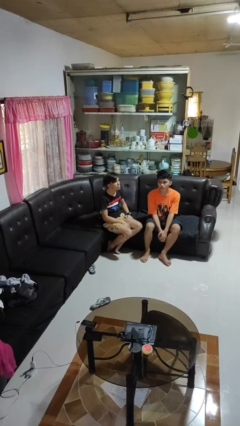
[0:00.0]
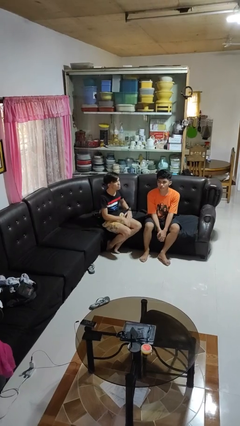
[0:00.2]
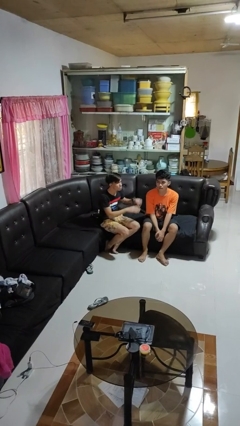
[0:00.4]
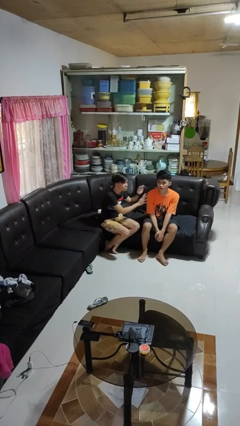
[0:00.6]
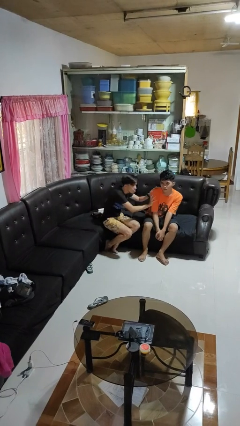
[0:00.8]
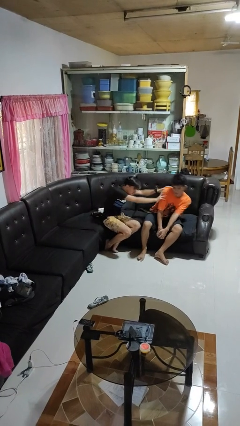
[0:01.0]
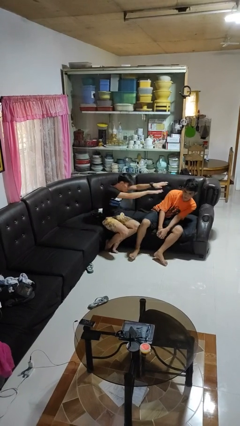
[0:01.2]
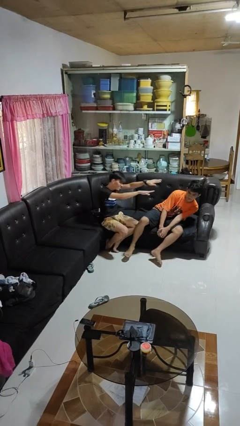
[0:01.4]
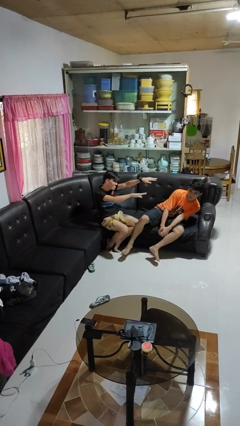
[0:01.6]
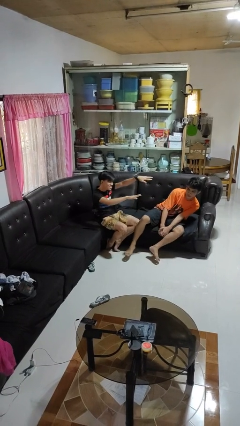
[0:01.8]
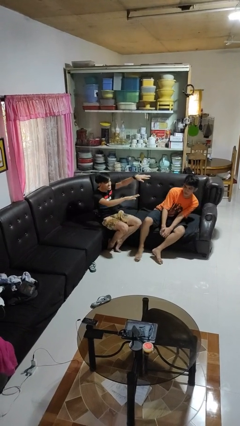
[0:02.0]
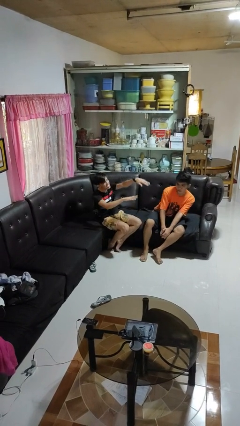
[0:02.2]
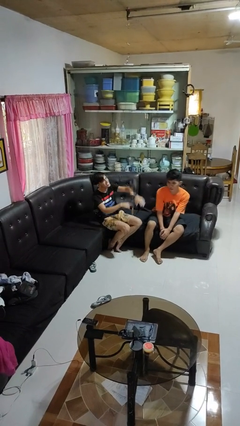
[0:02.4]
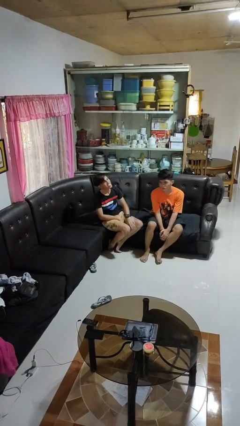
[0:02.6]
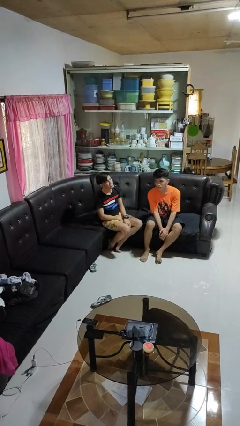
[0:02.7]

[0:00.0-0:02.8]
person shoves person

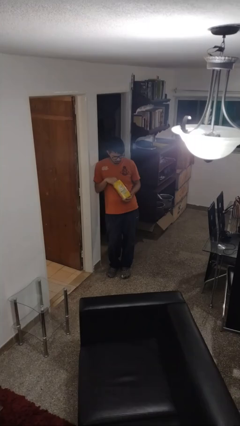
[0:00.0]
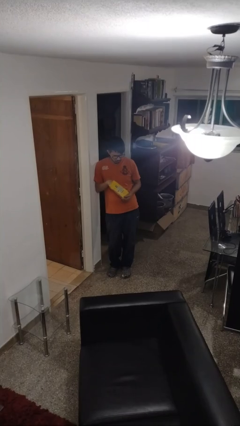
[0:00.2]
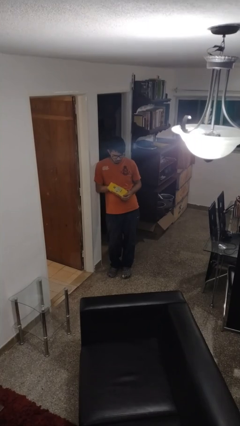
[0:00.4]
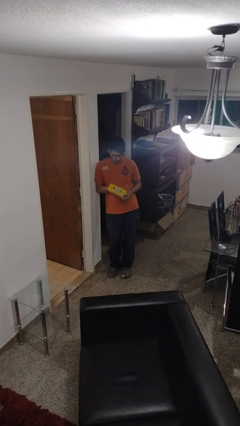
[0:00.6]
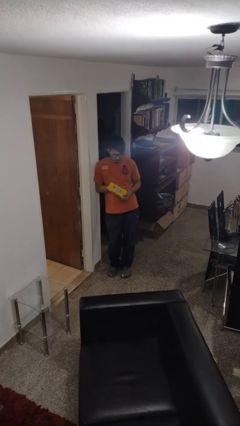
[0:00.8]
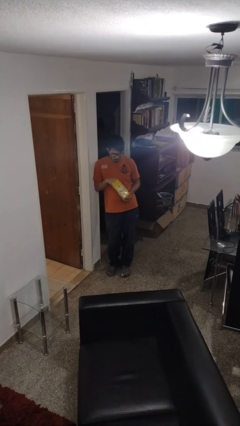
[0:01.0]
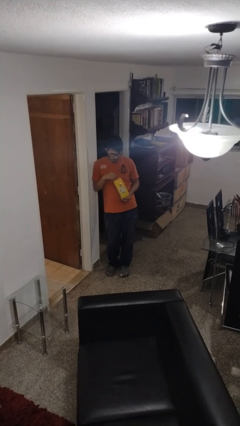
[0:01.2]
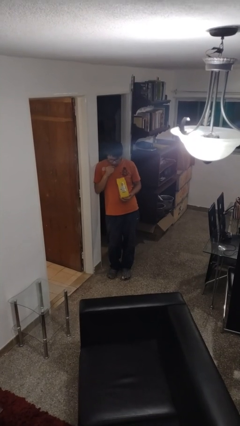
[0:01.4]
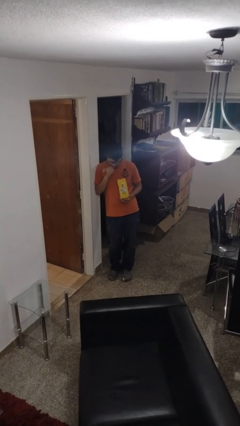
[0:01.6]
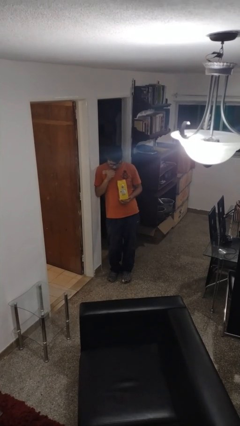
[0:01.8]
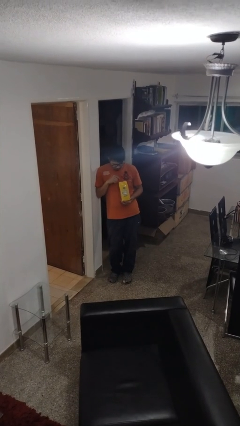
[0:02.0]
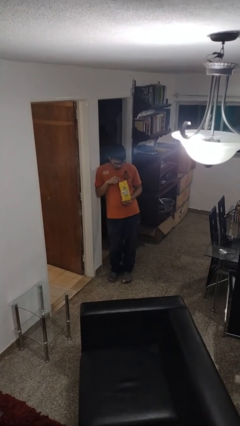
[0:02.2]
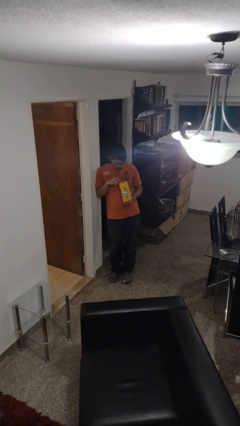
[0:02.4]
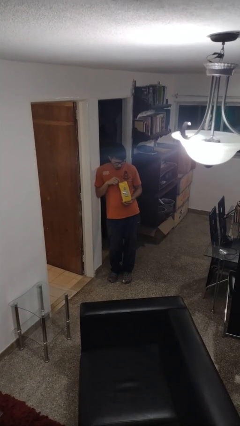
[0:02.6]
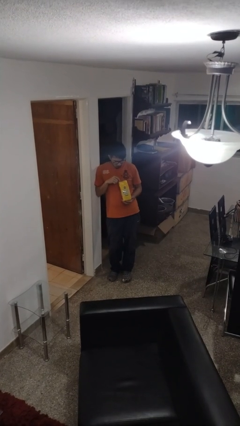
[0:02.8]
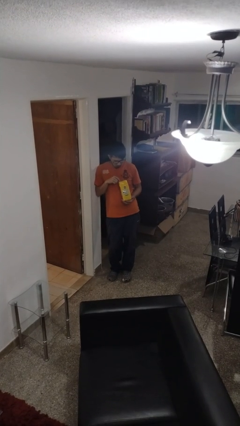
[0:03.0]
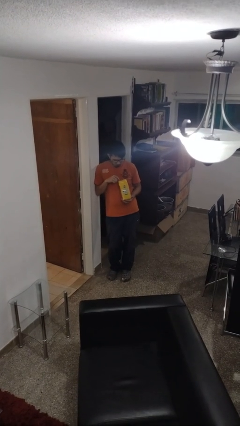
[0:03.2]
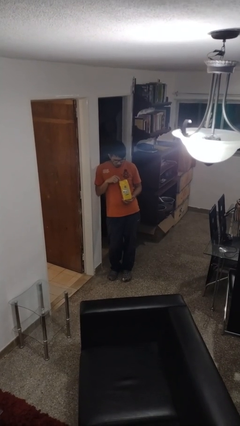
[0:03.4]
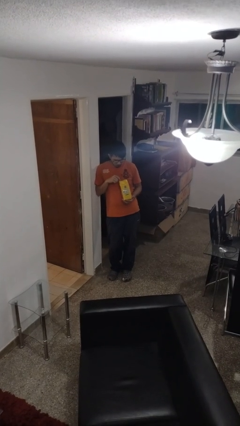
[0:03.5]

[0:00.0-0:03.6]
person eats snack from bag

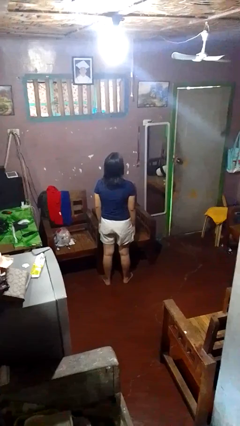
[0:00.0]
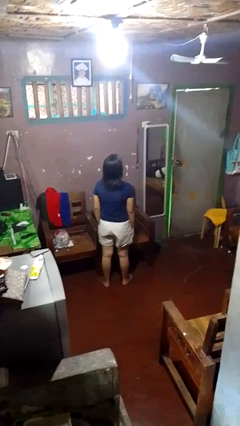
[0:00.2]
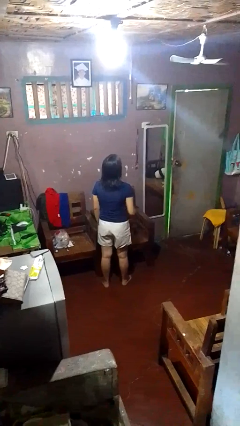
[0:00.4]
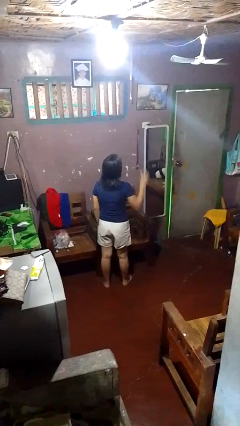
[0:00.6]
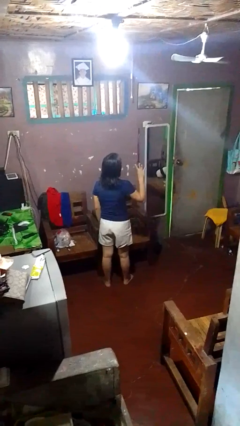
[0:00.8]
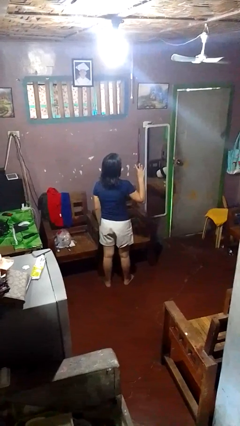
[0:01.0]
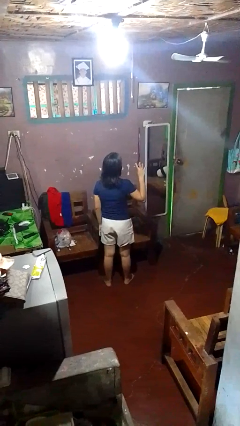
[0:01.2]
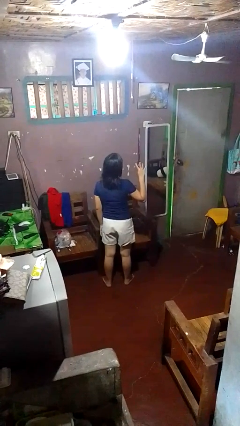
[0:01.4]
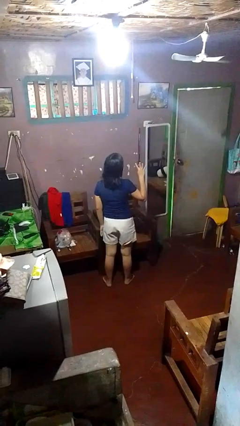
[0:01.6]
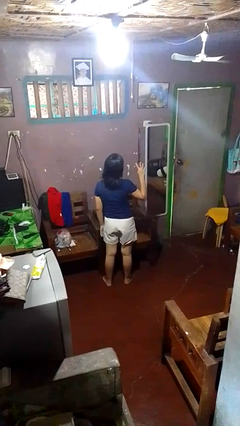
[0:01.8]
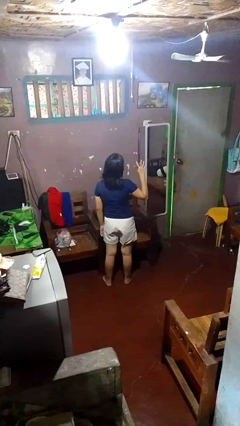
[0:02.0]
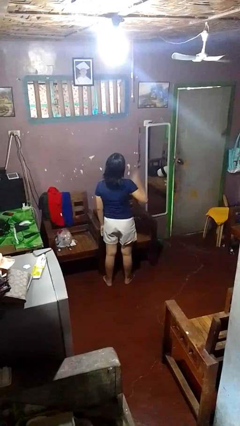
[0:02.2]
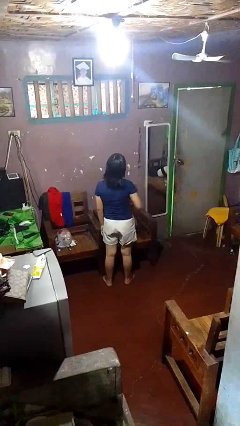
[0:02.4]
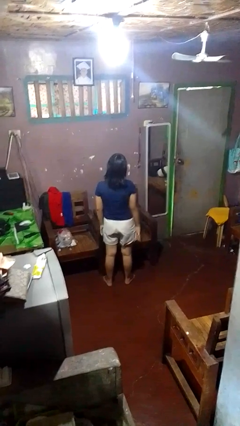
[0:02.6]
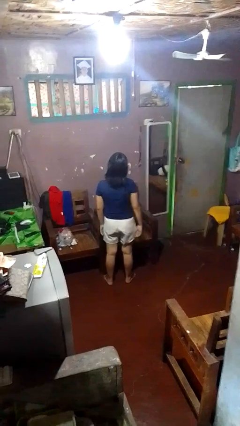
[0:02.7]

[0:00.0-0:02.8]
person gestures number four

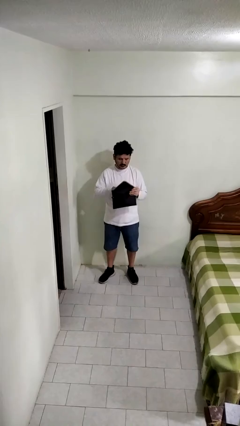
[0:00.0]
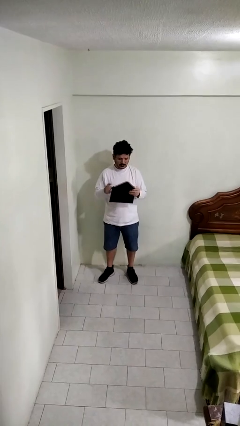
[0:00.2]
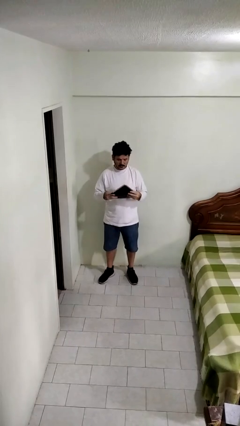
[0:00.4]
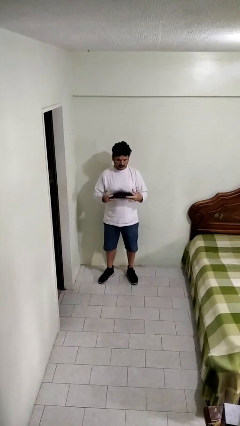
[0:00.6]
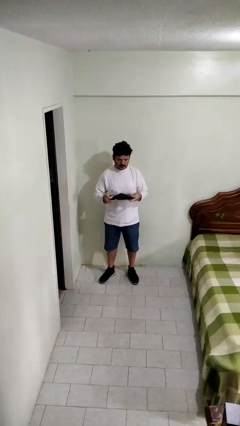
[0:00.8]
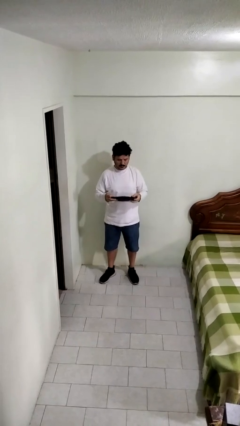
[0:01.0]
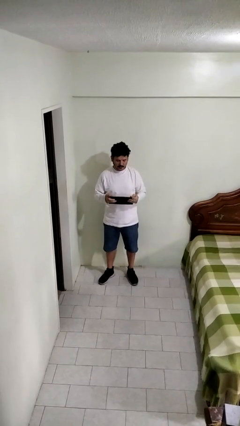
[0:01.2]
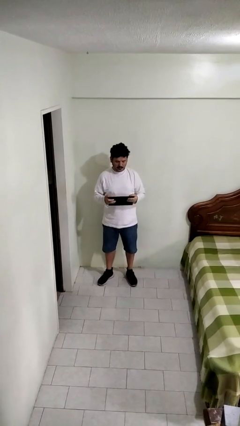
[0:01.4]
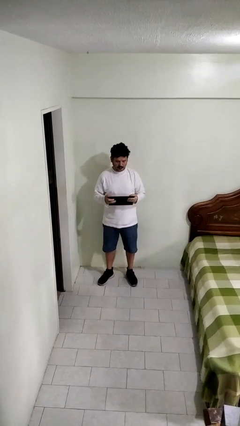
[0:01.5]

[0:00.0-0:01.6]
person puts object into purse

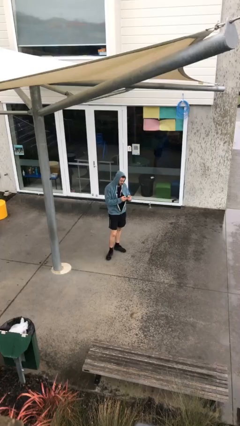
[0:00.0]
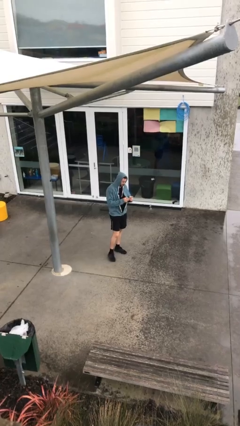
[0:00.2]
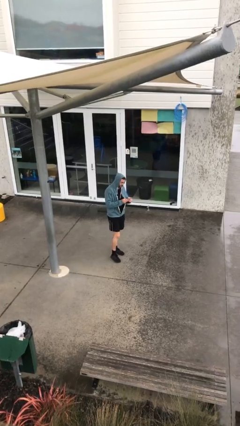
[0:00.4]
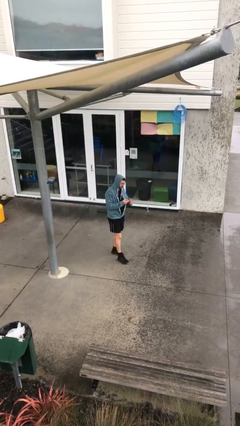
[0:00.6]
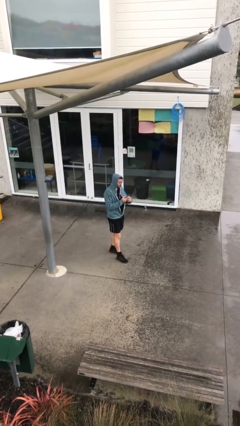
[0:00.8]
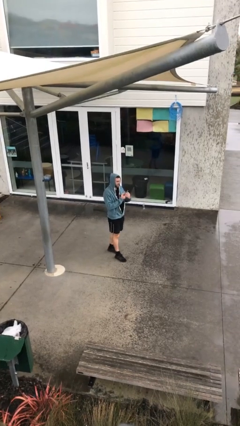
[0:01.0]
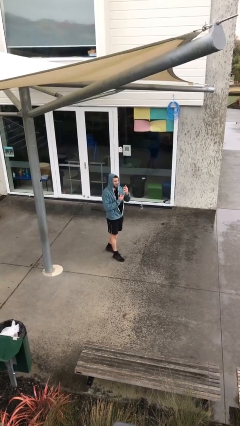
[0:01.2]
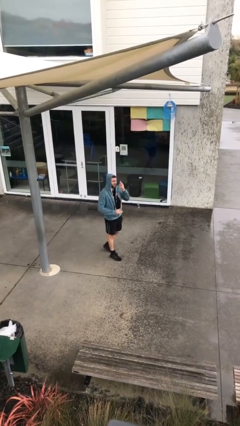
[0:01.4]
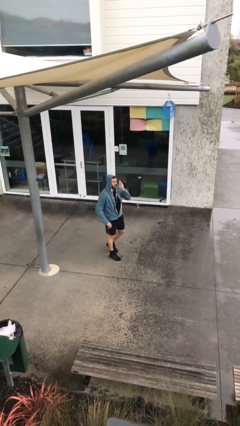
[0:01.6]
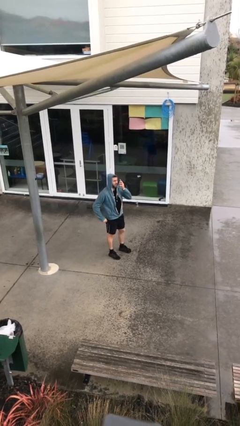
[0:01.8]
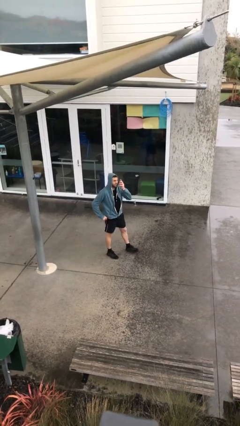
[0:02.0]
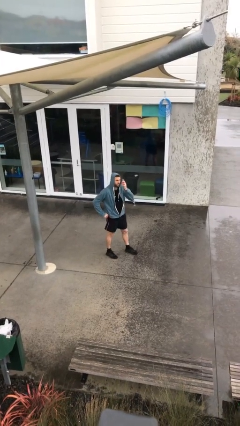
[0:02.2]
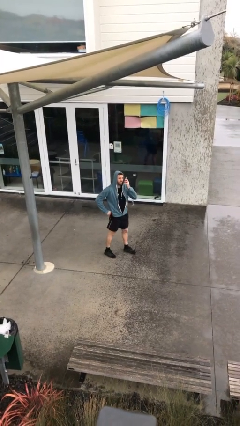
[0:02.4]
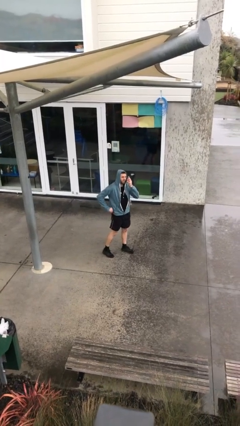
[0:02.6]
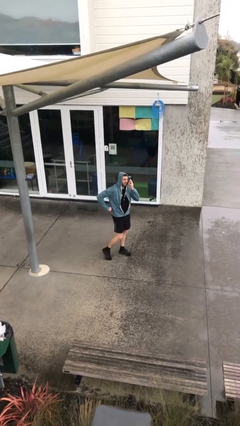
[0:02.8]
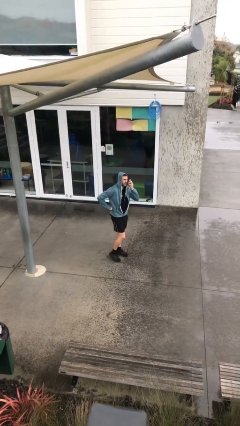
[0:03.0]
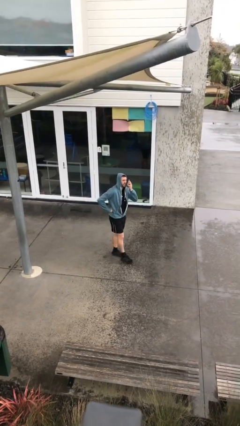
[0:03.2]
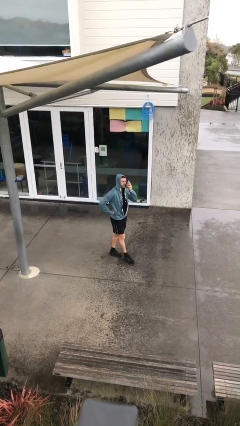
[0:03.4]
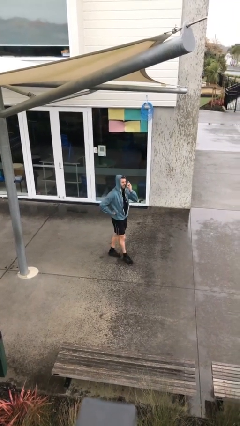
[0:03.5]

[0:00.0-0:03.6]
person talks on phone

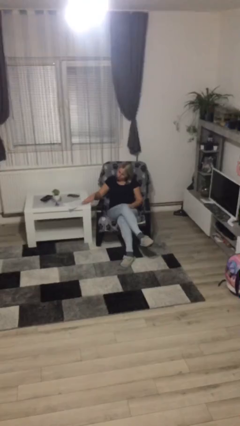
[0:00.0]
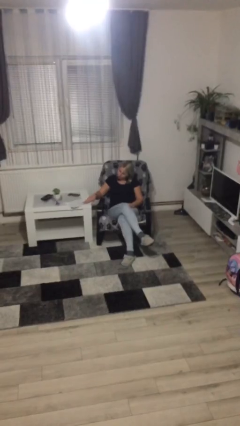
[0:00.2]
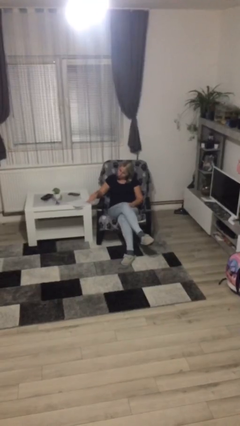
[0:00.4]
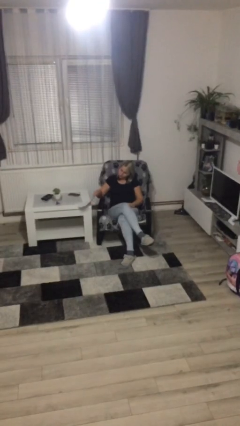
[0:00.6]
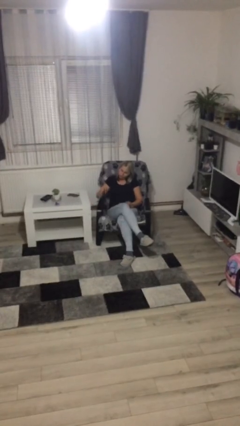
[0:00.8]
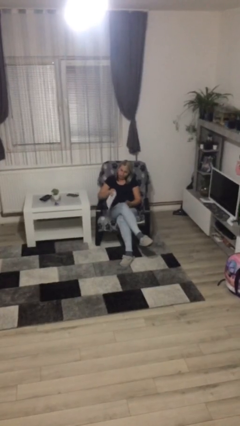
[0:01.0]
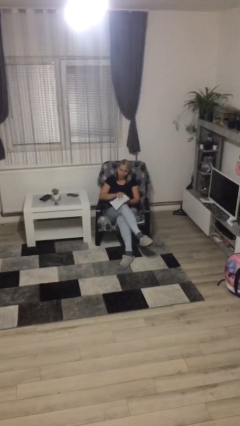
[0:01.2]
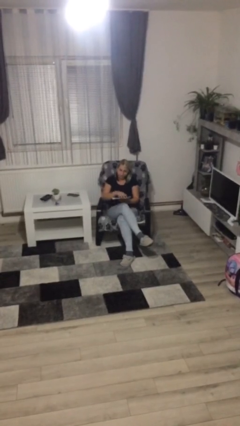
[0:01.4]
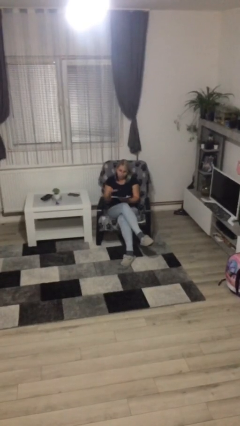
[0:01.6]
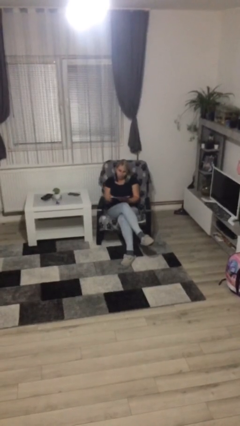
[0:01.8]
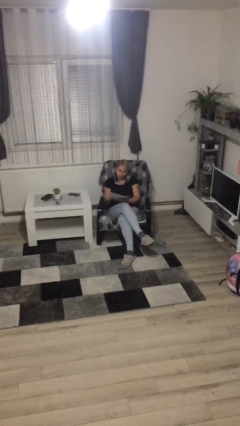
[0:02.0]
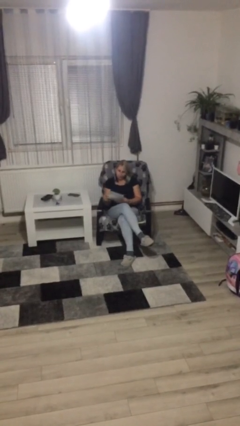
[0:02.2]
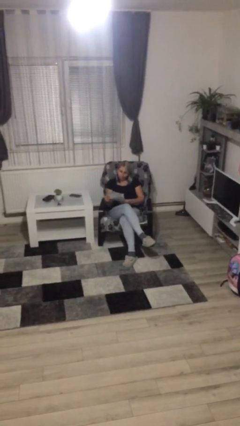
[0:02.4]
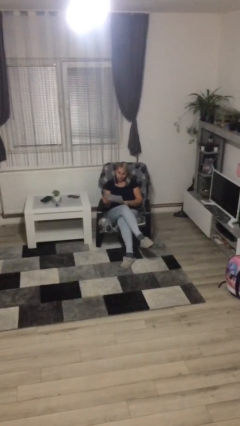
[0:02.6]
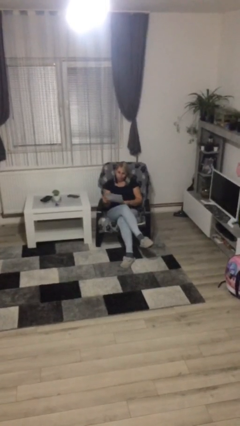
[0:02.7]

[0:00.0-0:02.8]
person picks up object from table
